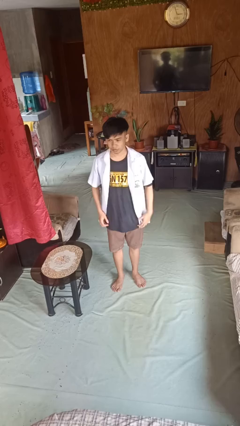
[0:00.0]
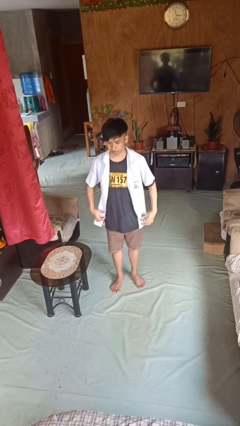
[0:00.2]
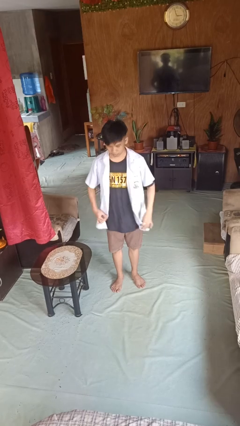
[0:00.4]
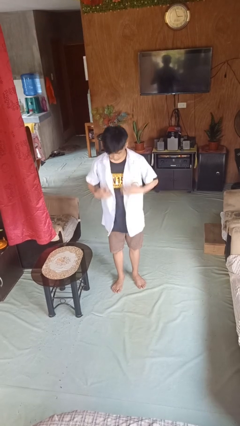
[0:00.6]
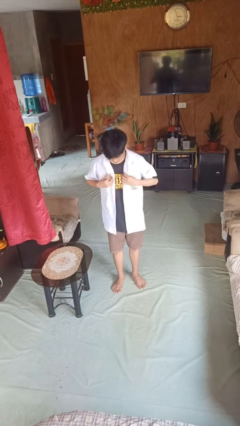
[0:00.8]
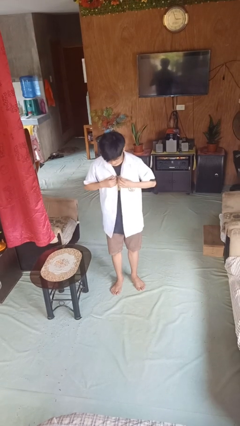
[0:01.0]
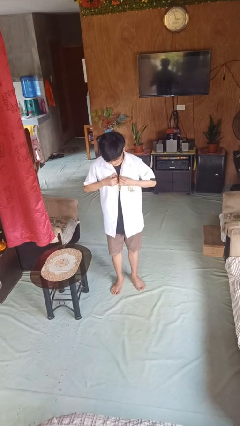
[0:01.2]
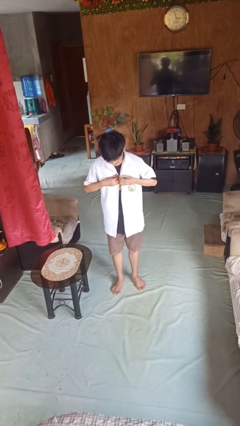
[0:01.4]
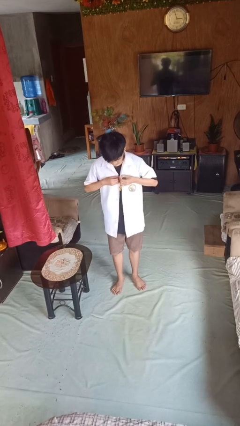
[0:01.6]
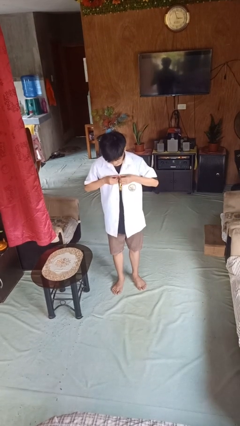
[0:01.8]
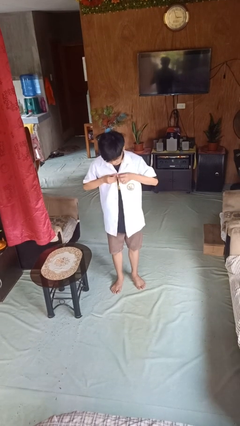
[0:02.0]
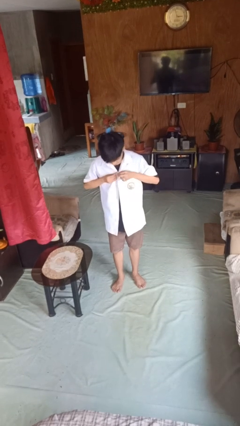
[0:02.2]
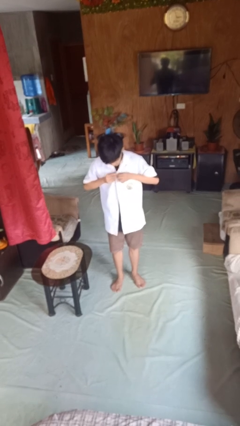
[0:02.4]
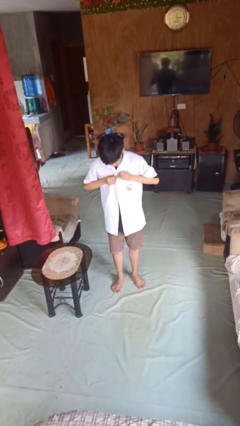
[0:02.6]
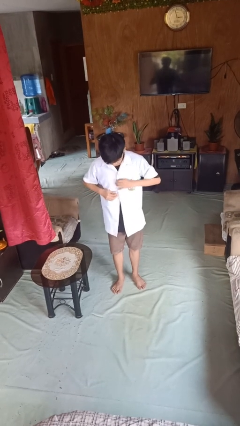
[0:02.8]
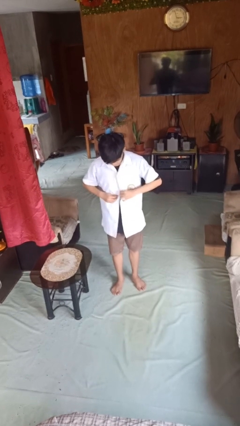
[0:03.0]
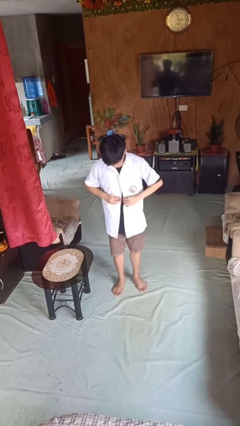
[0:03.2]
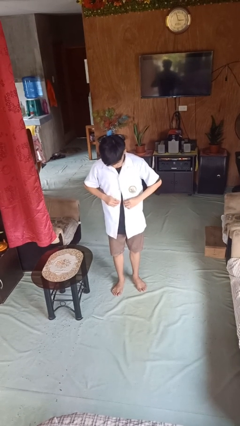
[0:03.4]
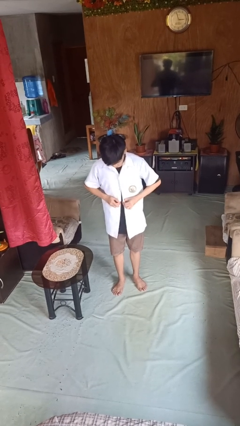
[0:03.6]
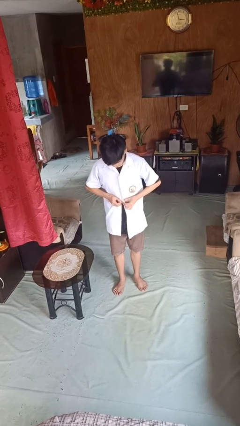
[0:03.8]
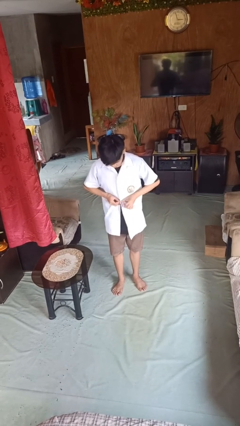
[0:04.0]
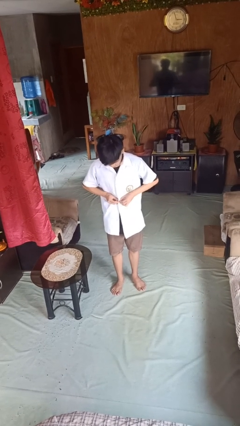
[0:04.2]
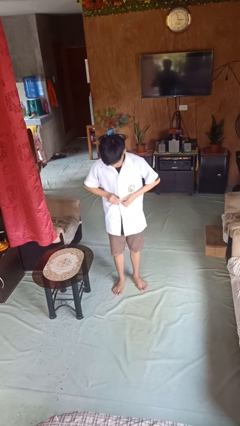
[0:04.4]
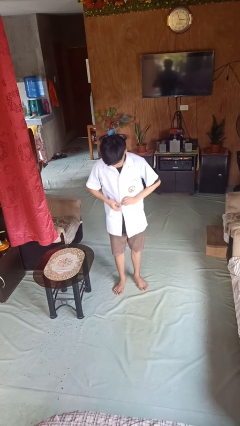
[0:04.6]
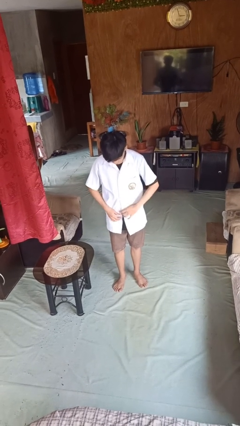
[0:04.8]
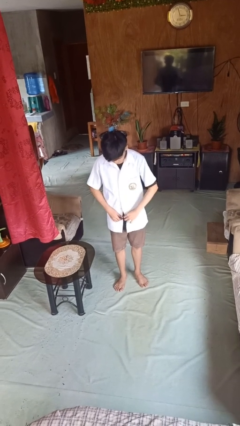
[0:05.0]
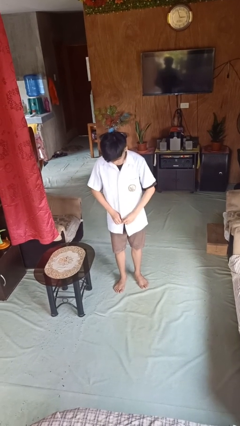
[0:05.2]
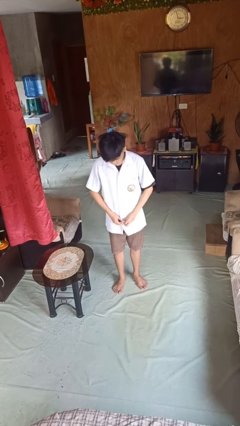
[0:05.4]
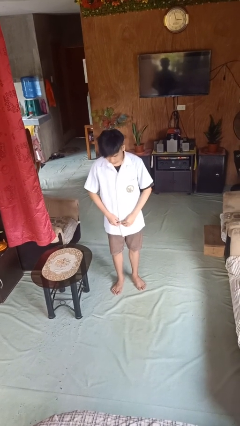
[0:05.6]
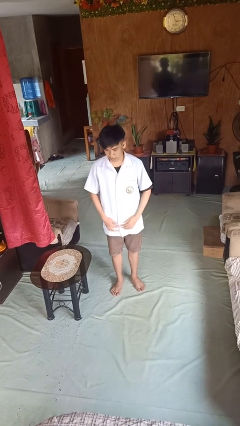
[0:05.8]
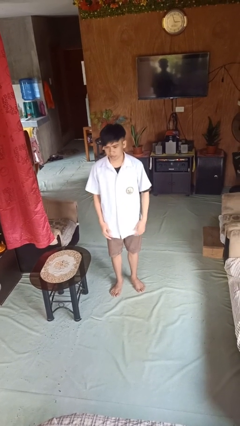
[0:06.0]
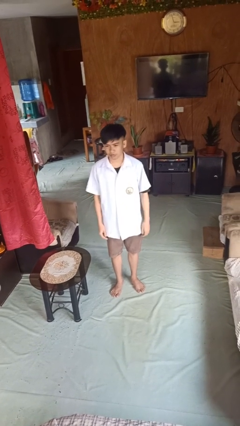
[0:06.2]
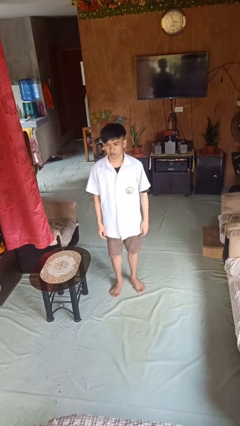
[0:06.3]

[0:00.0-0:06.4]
person buttons shirt

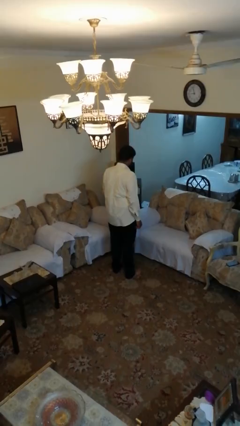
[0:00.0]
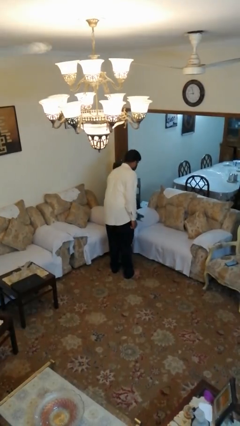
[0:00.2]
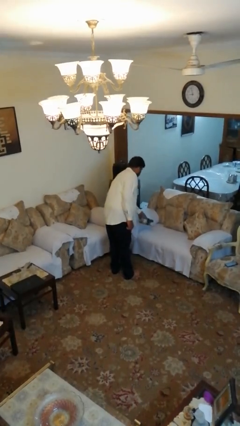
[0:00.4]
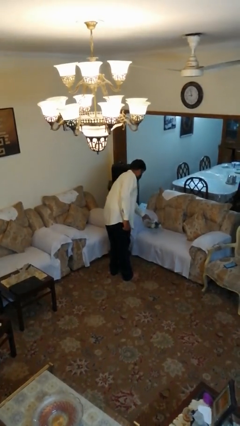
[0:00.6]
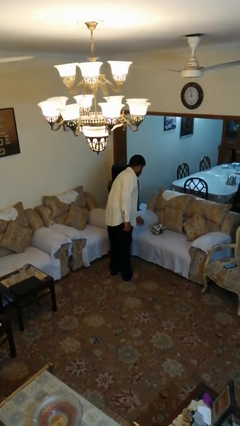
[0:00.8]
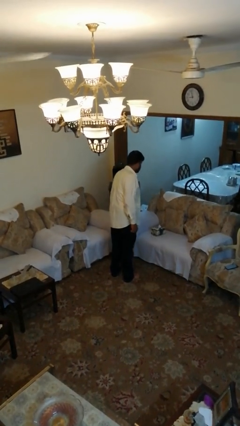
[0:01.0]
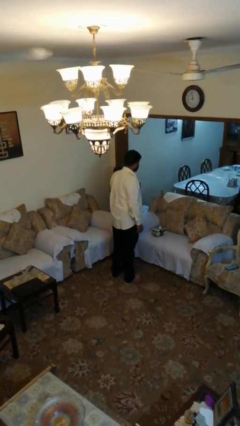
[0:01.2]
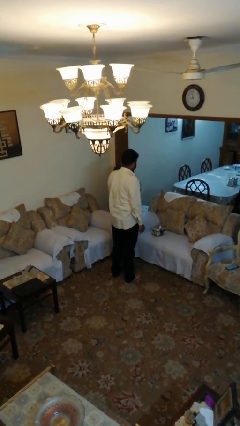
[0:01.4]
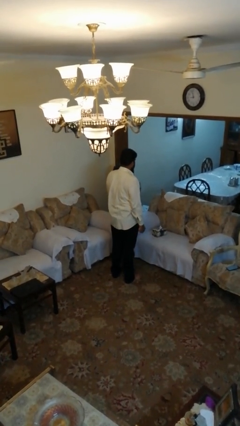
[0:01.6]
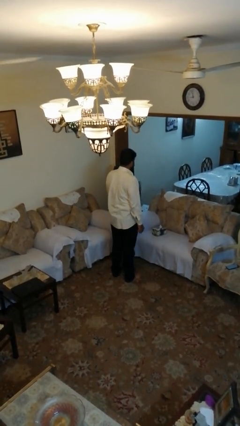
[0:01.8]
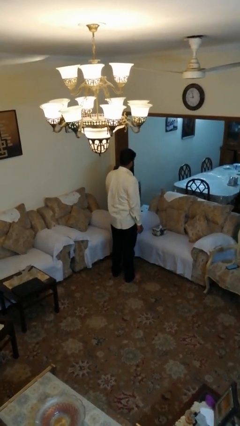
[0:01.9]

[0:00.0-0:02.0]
person puts down object on couch

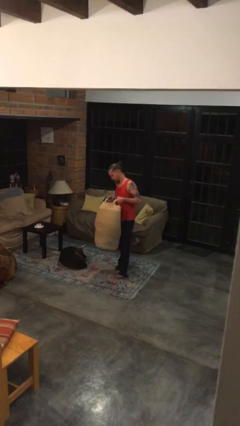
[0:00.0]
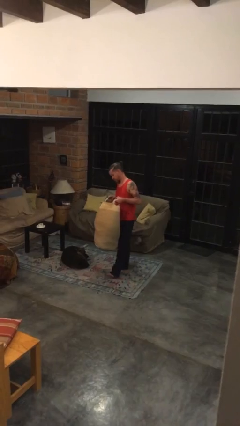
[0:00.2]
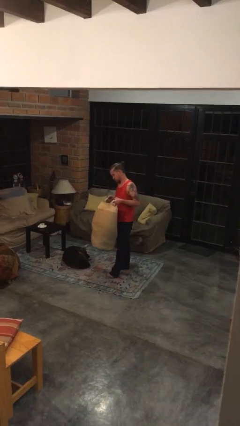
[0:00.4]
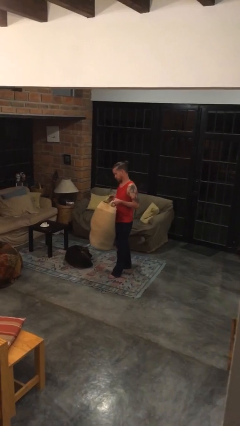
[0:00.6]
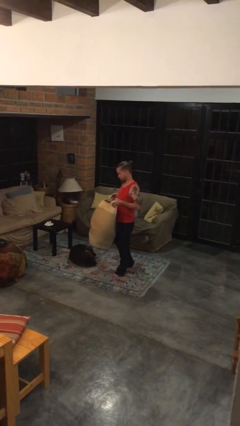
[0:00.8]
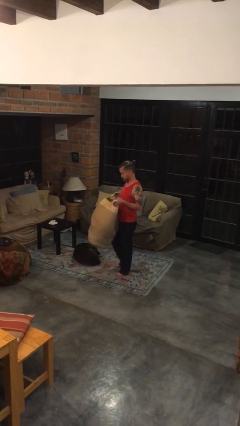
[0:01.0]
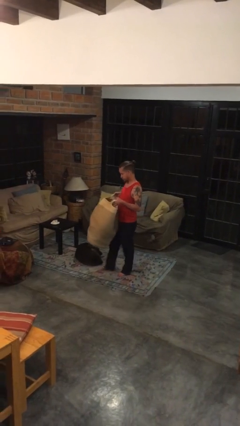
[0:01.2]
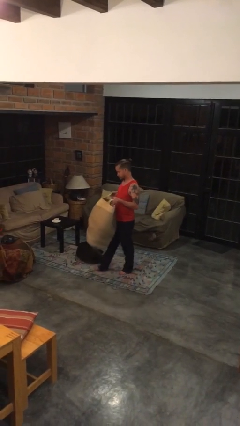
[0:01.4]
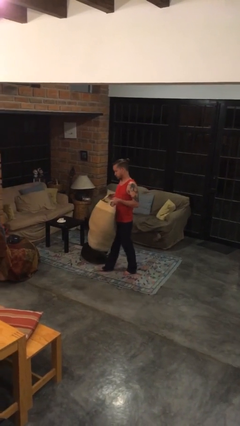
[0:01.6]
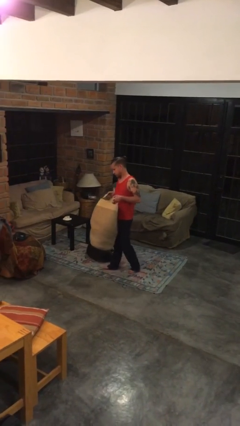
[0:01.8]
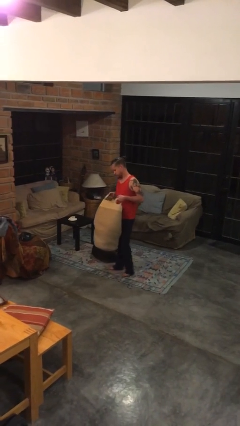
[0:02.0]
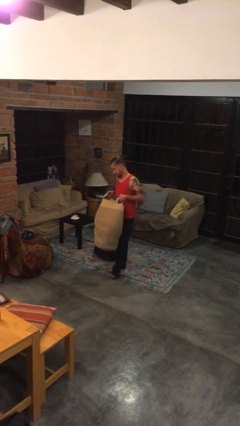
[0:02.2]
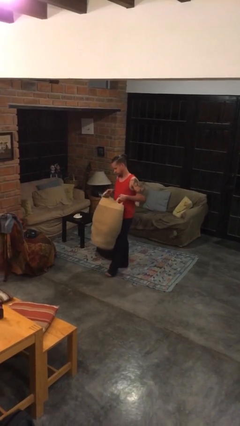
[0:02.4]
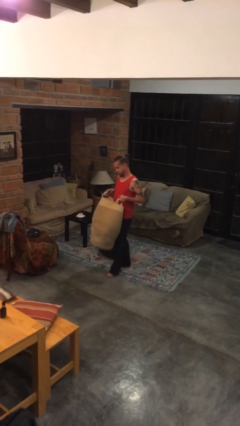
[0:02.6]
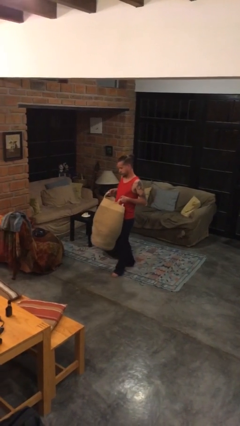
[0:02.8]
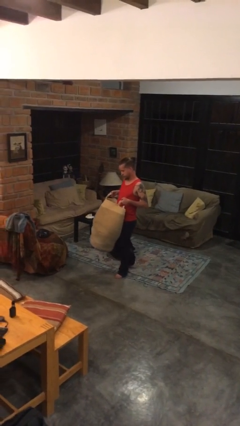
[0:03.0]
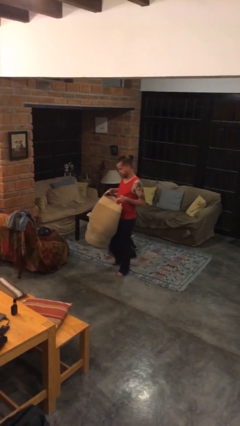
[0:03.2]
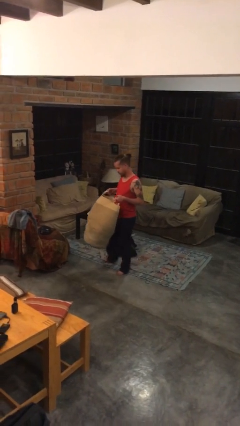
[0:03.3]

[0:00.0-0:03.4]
person carries laundry basket

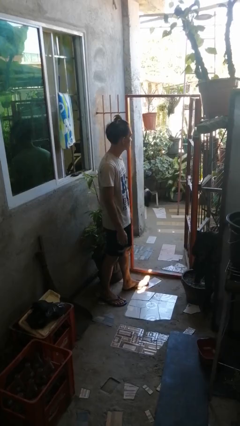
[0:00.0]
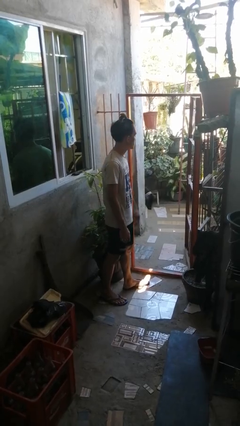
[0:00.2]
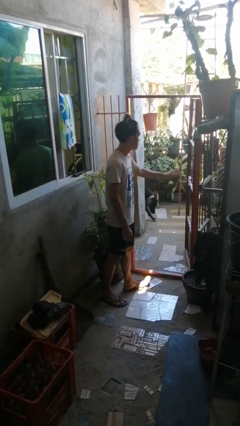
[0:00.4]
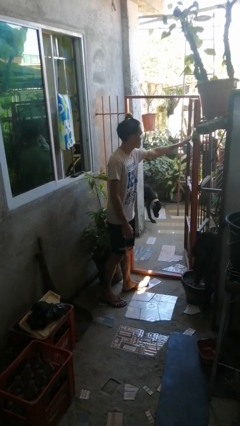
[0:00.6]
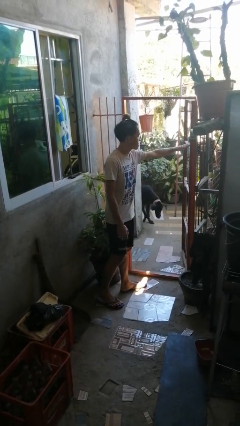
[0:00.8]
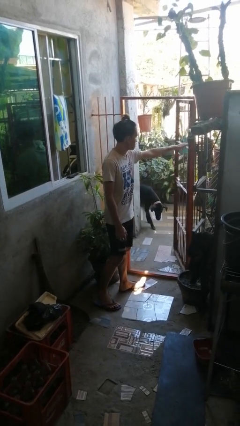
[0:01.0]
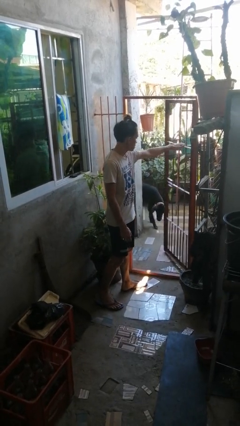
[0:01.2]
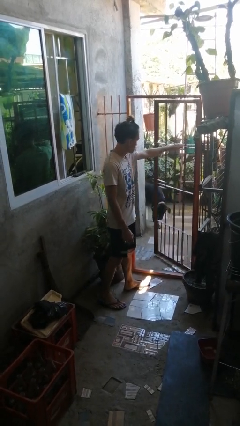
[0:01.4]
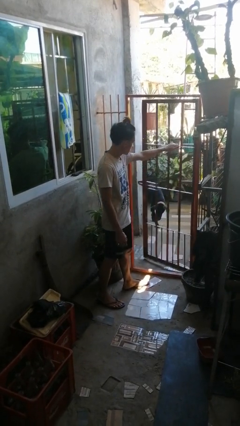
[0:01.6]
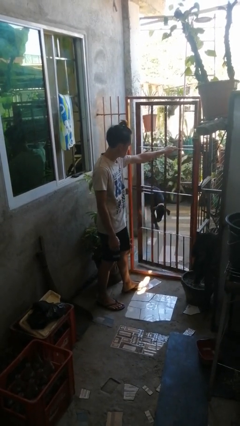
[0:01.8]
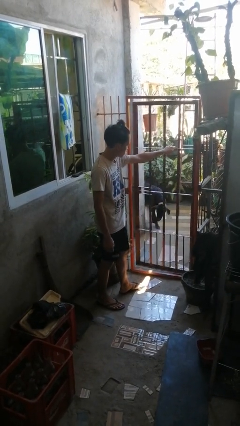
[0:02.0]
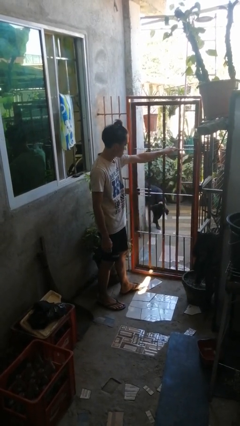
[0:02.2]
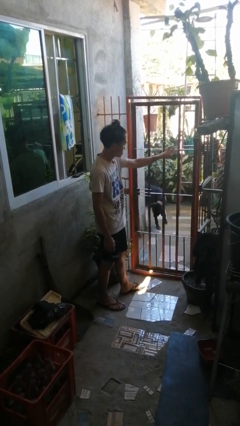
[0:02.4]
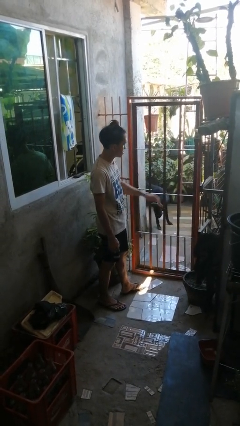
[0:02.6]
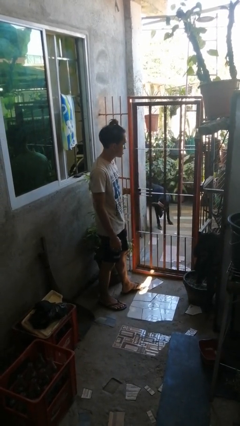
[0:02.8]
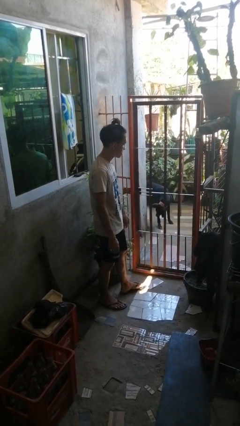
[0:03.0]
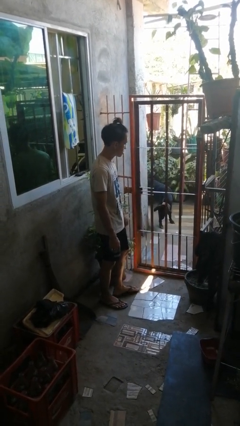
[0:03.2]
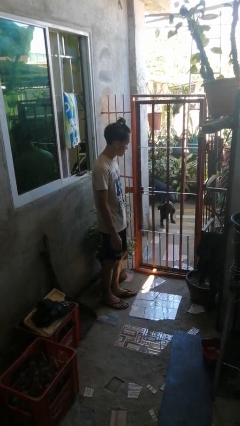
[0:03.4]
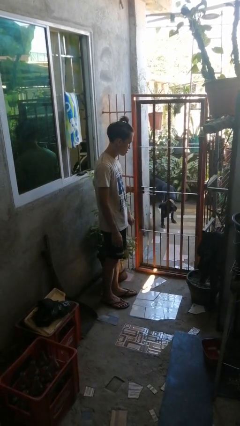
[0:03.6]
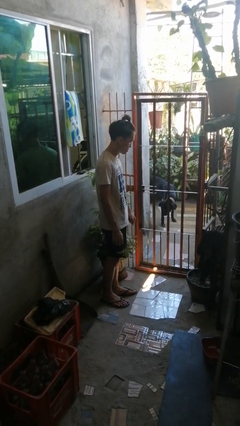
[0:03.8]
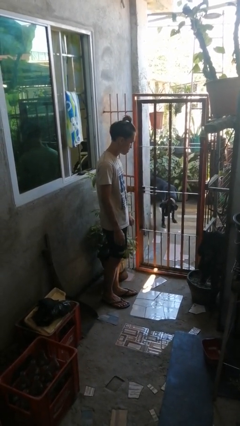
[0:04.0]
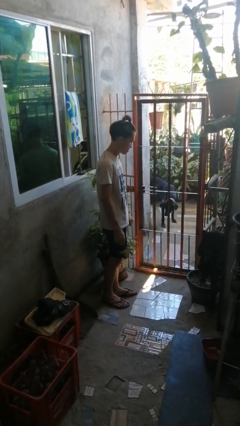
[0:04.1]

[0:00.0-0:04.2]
person closes gate

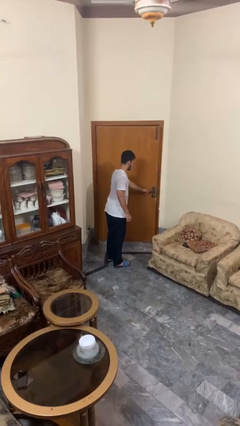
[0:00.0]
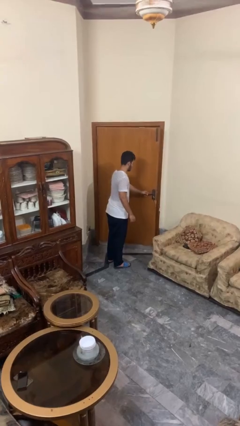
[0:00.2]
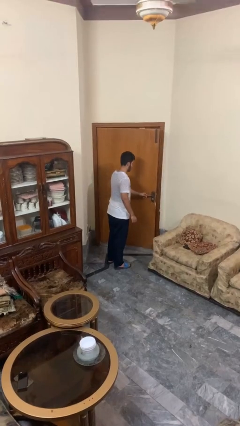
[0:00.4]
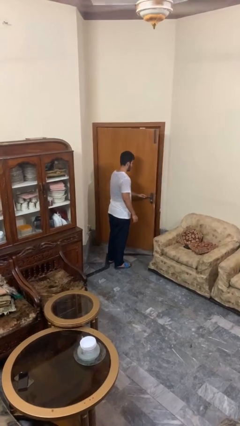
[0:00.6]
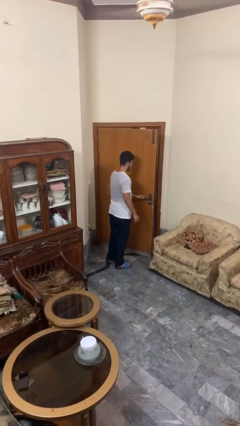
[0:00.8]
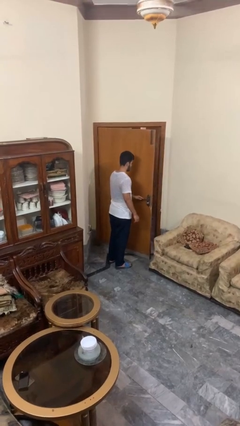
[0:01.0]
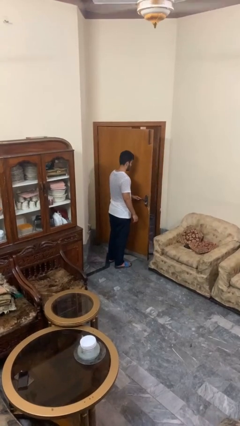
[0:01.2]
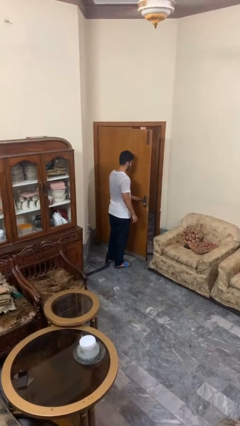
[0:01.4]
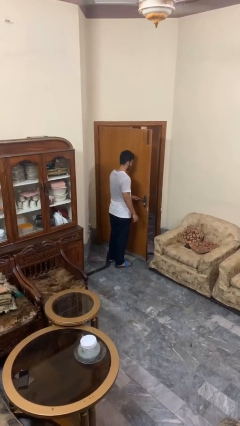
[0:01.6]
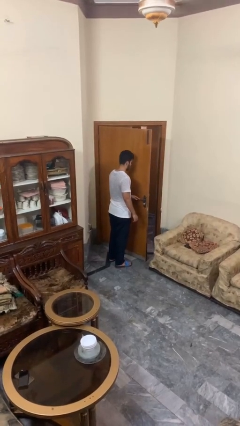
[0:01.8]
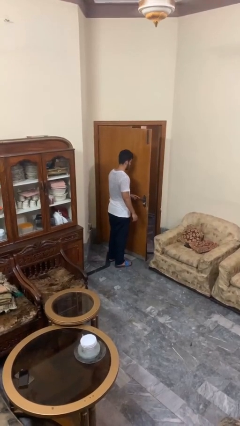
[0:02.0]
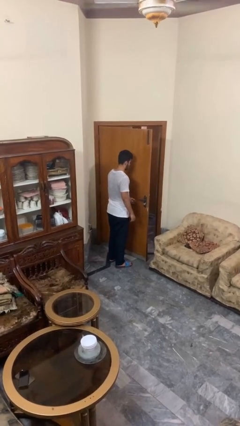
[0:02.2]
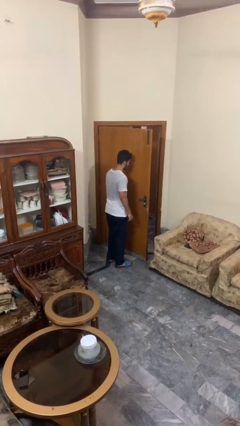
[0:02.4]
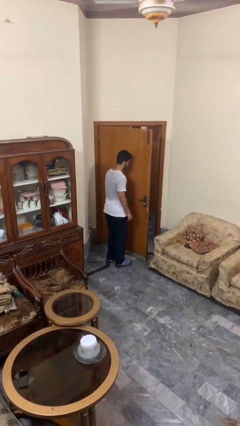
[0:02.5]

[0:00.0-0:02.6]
person opens facility door
